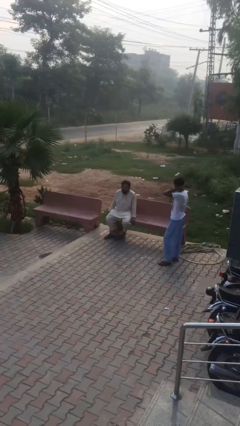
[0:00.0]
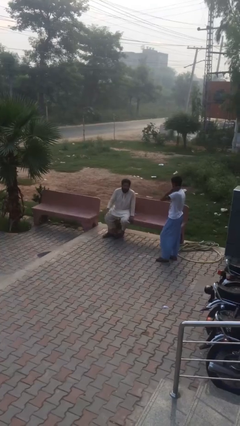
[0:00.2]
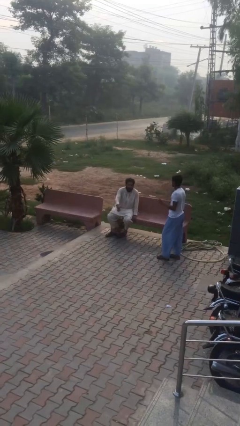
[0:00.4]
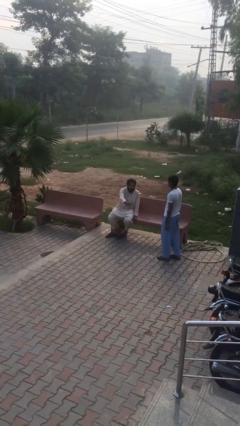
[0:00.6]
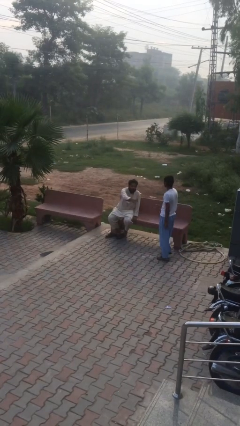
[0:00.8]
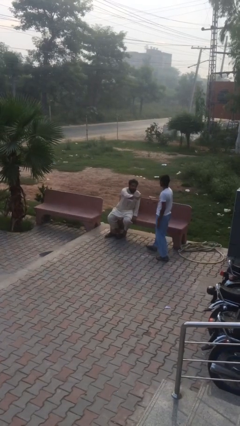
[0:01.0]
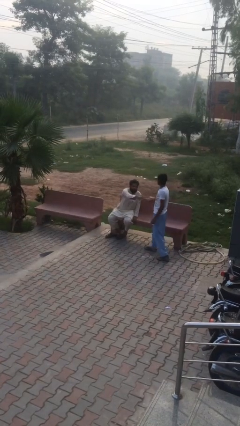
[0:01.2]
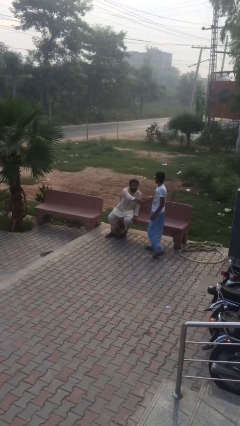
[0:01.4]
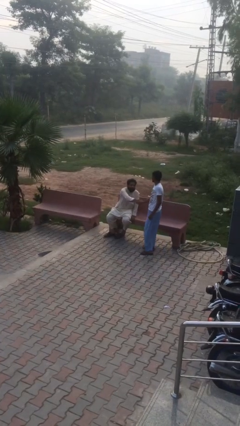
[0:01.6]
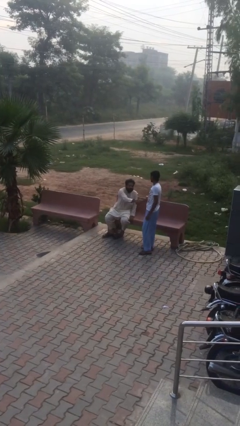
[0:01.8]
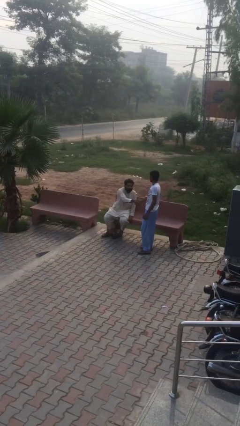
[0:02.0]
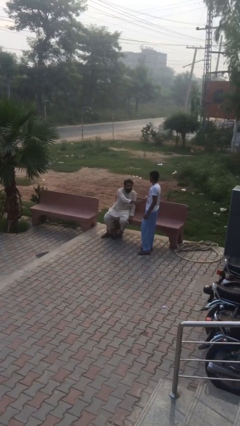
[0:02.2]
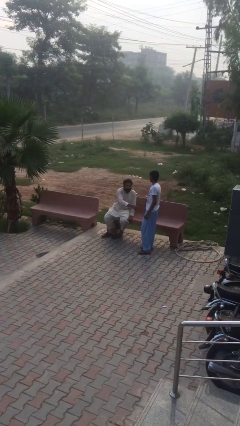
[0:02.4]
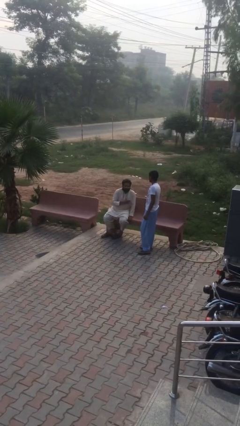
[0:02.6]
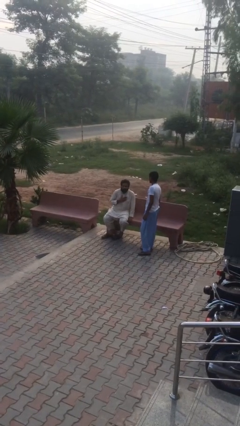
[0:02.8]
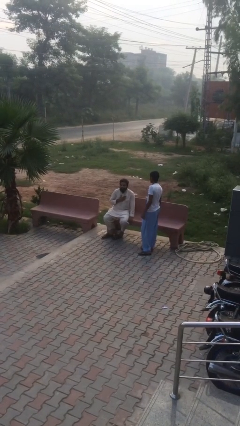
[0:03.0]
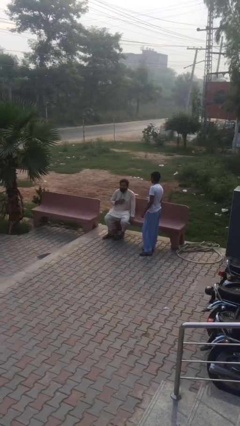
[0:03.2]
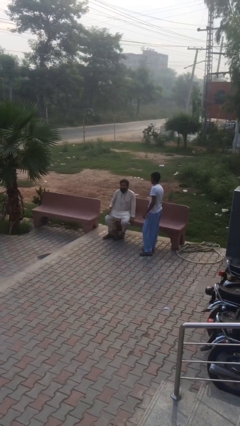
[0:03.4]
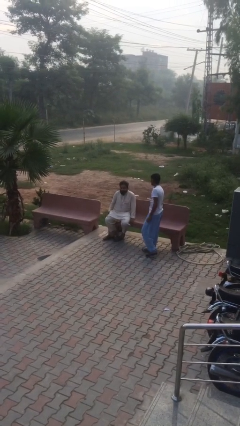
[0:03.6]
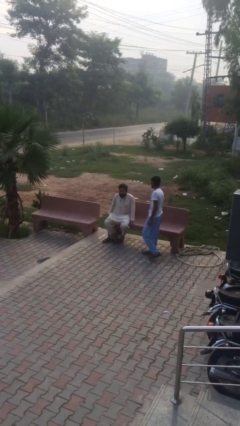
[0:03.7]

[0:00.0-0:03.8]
person shakes hand

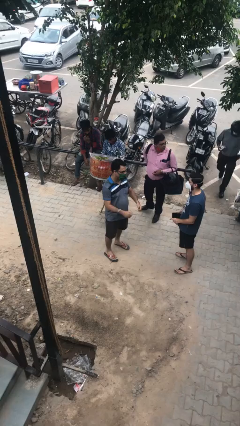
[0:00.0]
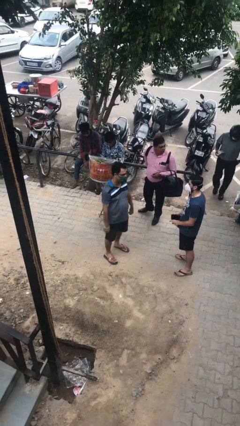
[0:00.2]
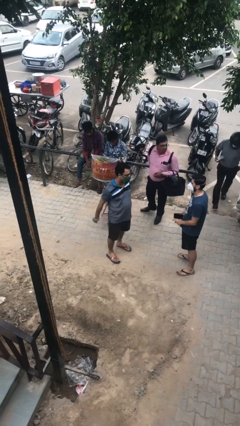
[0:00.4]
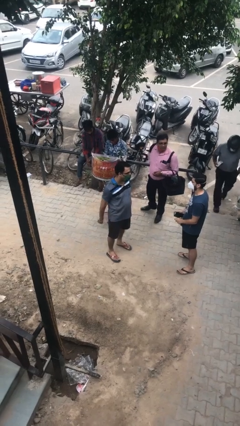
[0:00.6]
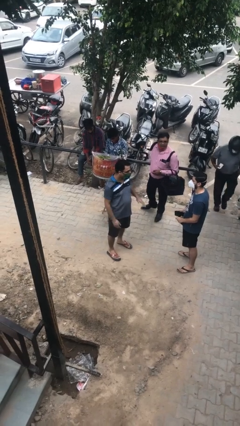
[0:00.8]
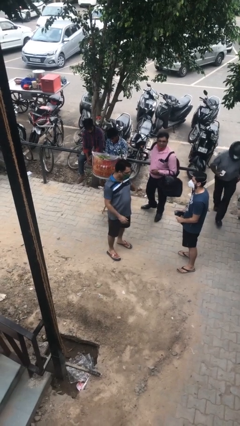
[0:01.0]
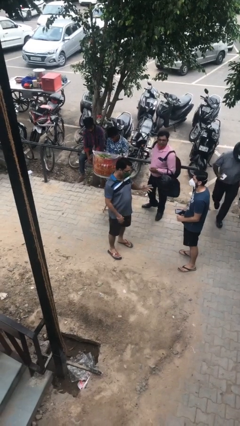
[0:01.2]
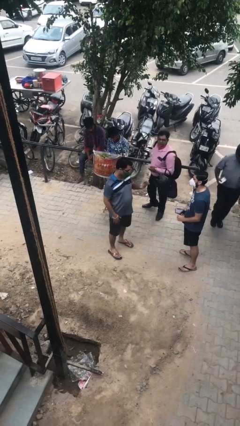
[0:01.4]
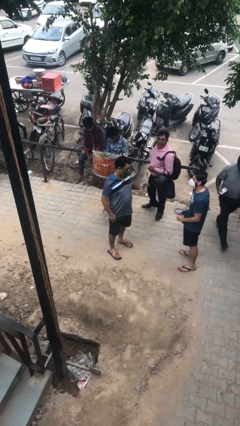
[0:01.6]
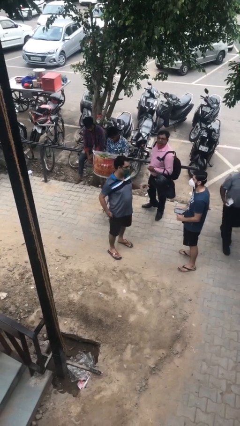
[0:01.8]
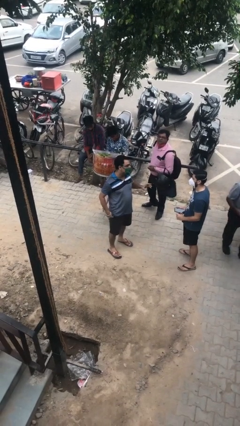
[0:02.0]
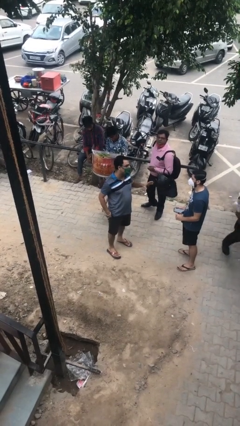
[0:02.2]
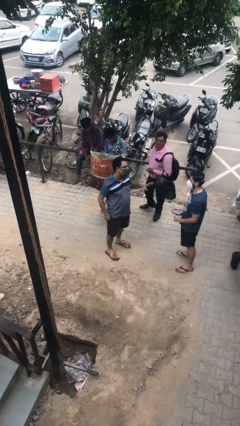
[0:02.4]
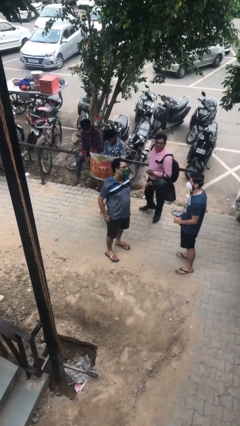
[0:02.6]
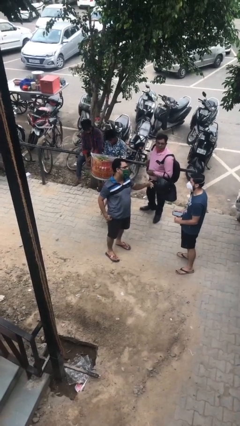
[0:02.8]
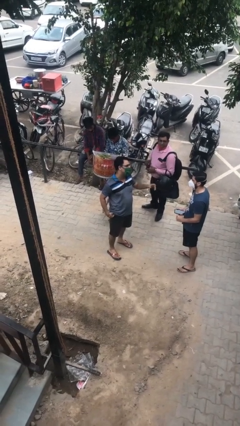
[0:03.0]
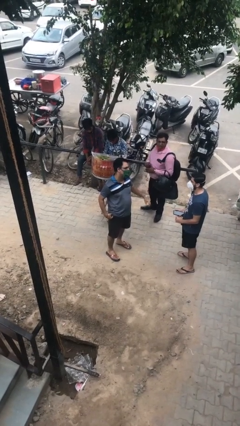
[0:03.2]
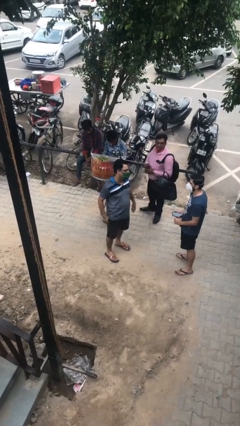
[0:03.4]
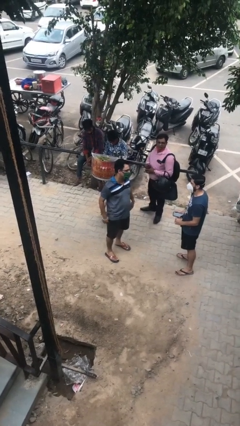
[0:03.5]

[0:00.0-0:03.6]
person talks to person

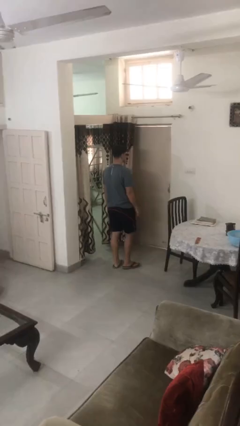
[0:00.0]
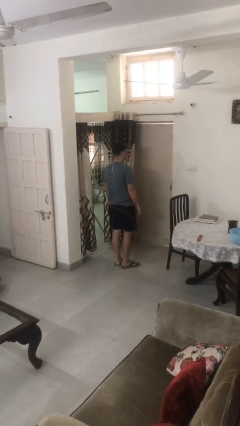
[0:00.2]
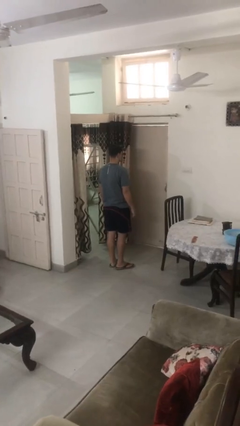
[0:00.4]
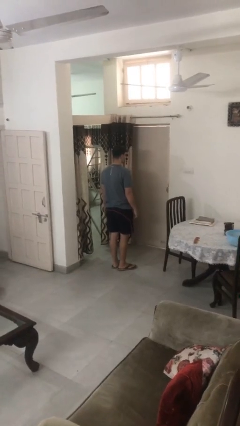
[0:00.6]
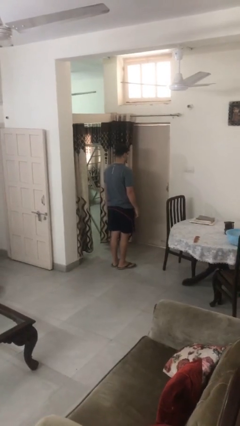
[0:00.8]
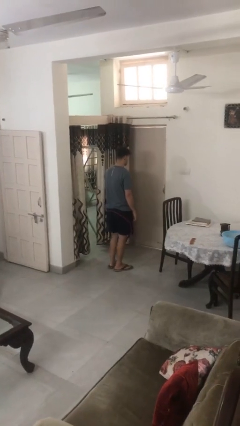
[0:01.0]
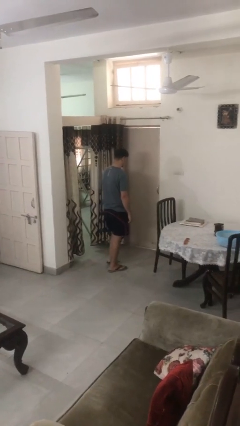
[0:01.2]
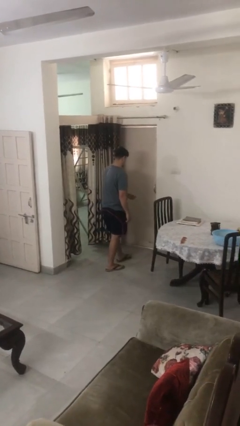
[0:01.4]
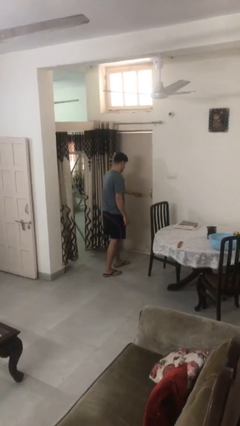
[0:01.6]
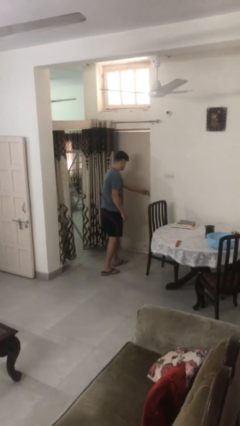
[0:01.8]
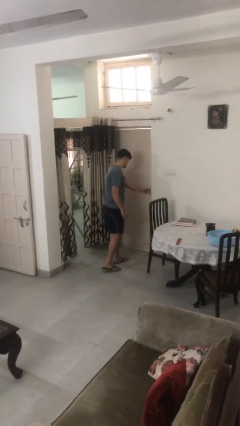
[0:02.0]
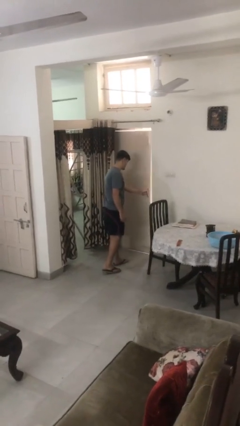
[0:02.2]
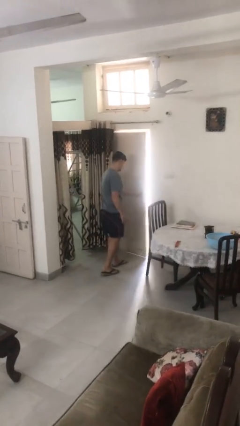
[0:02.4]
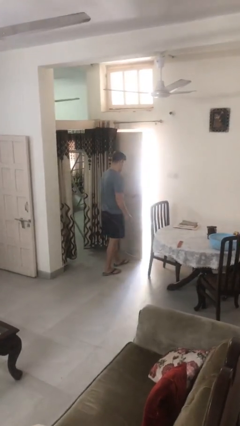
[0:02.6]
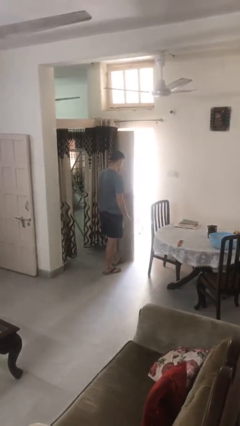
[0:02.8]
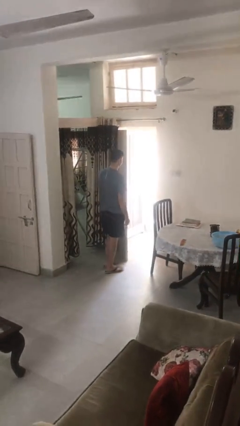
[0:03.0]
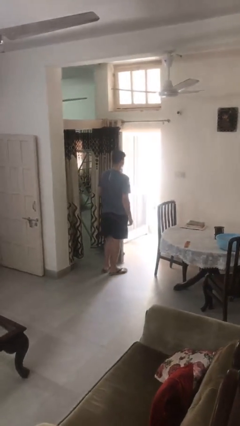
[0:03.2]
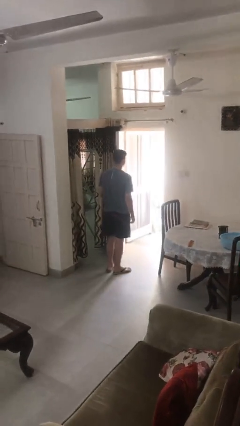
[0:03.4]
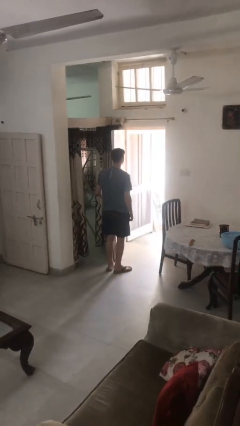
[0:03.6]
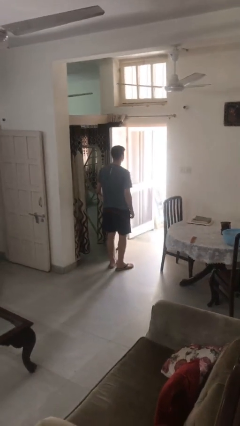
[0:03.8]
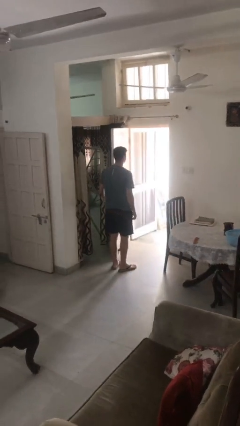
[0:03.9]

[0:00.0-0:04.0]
person opens facility door

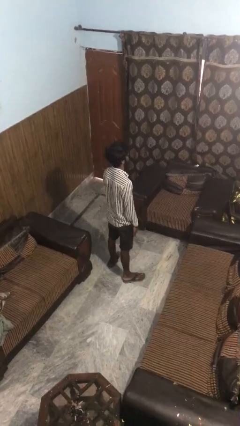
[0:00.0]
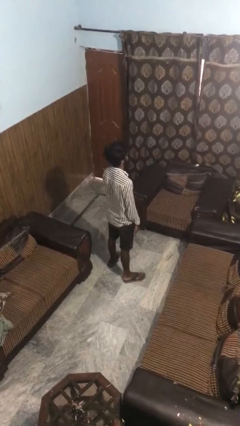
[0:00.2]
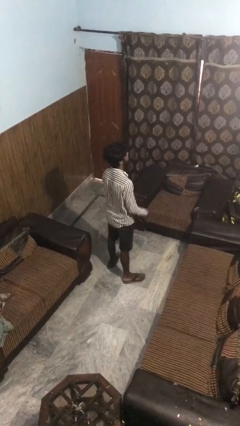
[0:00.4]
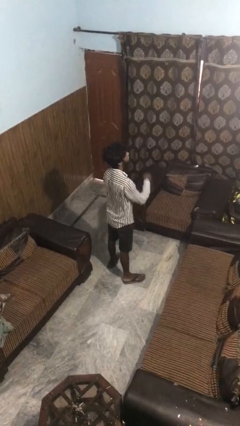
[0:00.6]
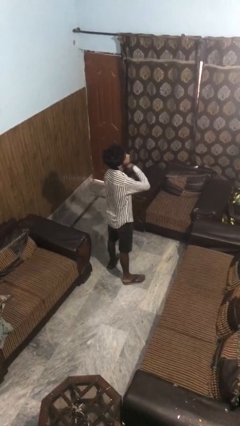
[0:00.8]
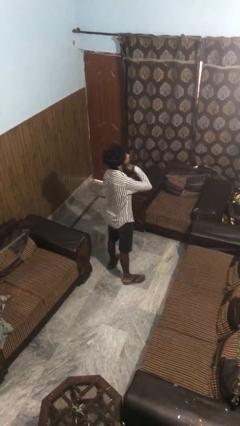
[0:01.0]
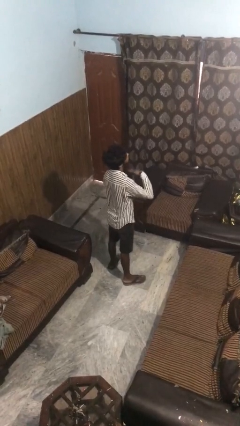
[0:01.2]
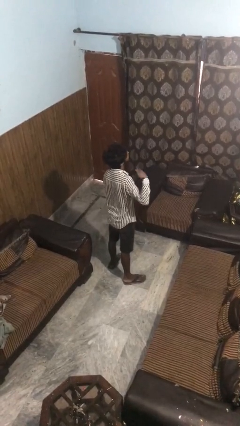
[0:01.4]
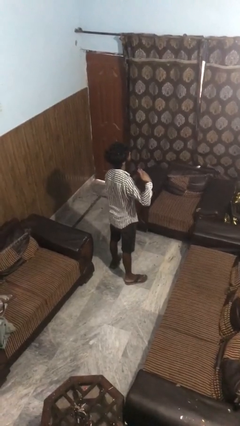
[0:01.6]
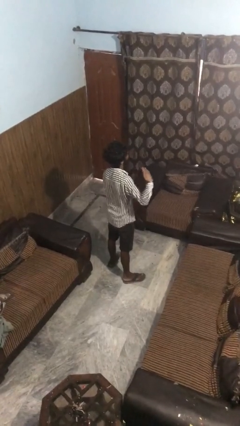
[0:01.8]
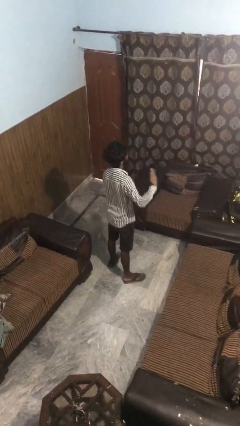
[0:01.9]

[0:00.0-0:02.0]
person gestures cut

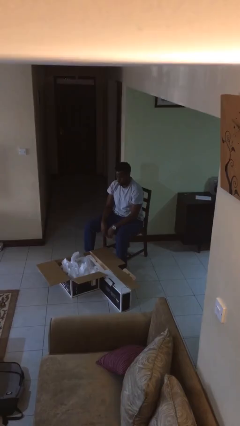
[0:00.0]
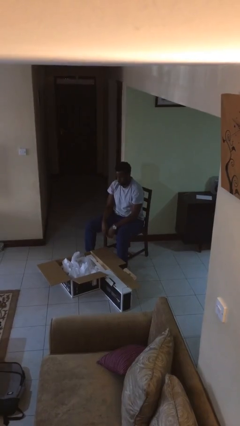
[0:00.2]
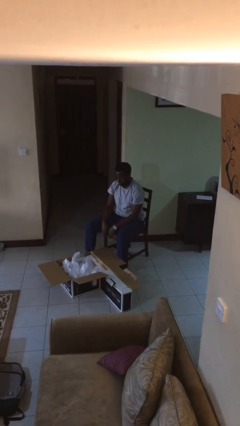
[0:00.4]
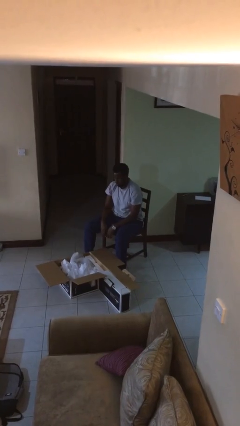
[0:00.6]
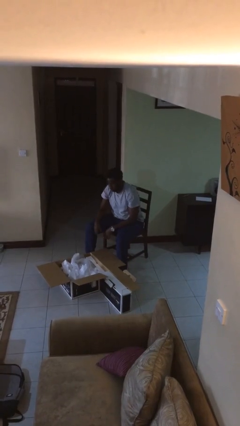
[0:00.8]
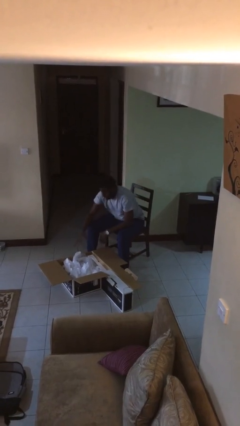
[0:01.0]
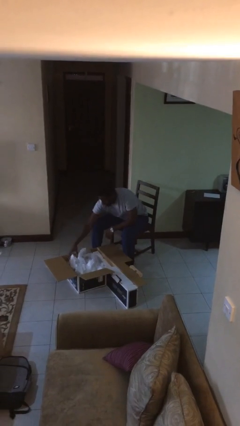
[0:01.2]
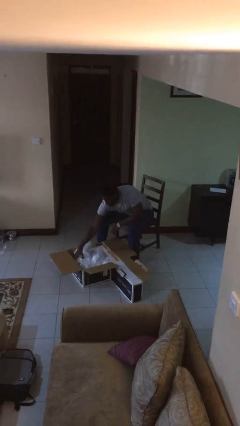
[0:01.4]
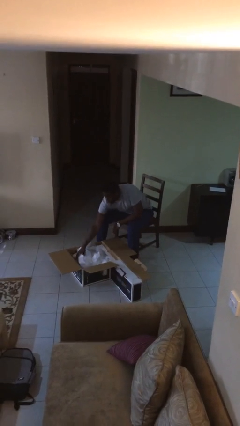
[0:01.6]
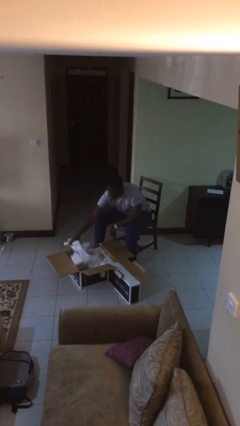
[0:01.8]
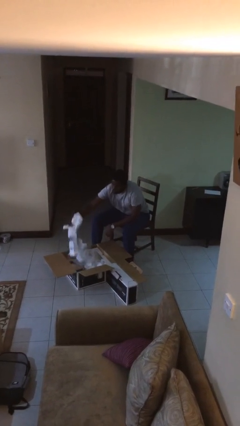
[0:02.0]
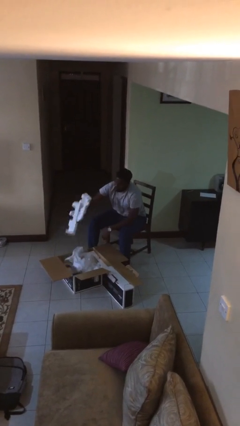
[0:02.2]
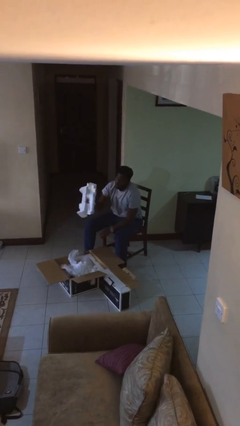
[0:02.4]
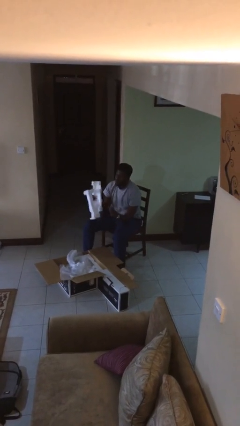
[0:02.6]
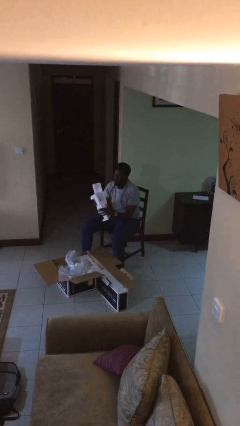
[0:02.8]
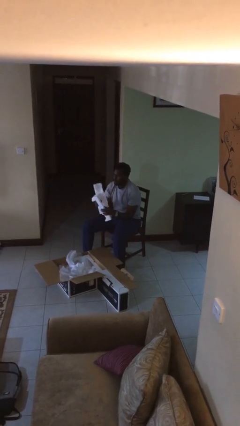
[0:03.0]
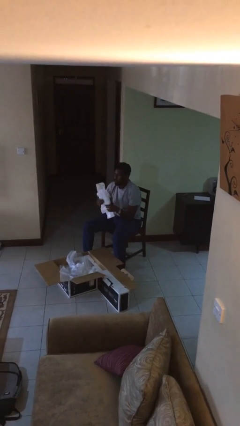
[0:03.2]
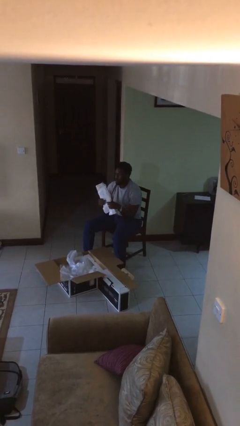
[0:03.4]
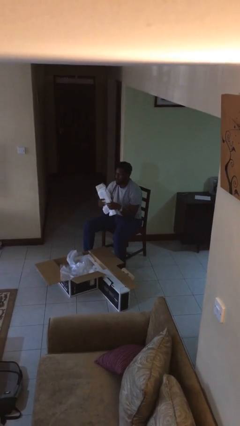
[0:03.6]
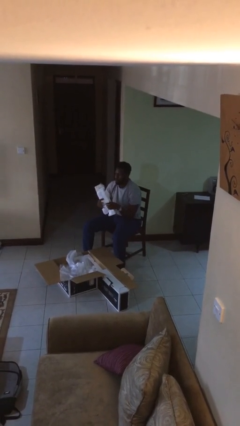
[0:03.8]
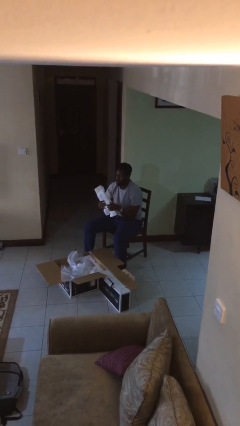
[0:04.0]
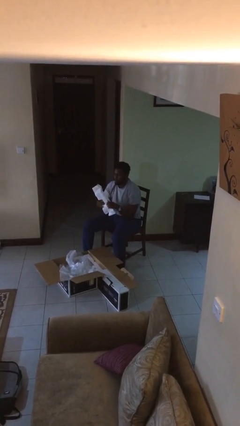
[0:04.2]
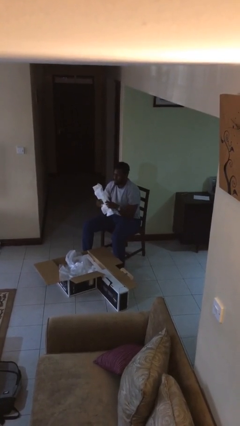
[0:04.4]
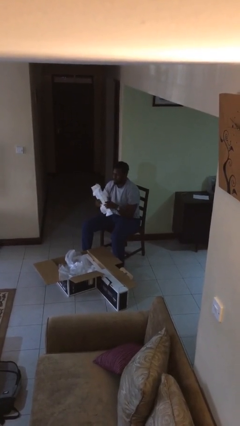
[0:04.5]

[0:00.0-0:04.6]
person takes object from box
